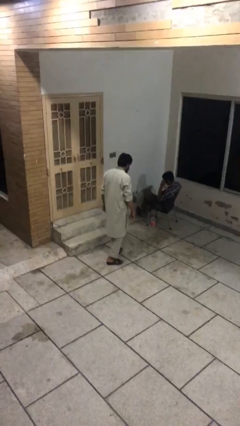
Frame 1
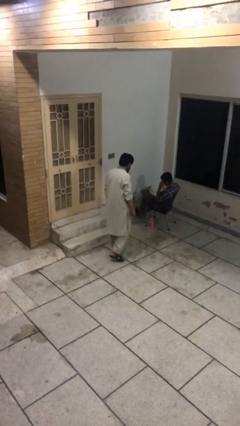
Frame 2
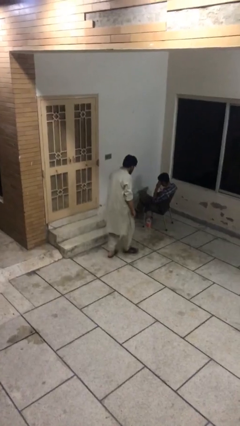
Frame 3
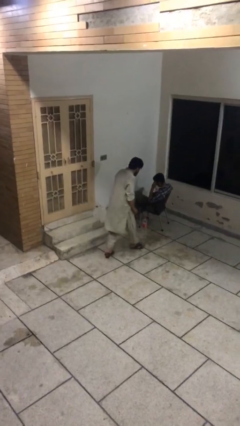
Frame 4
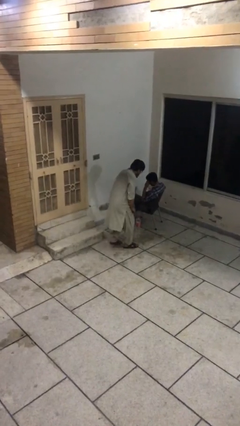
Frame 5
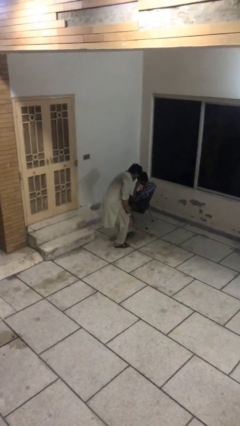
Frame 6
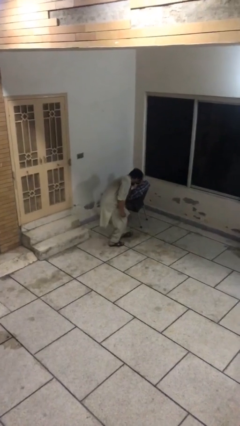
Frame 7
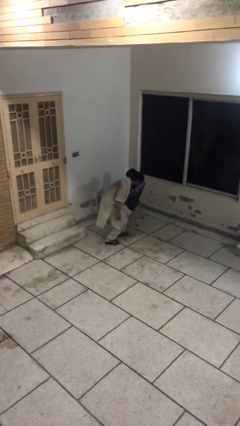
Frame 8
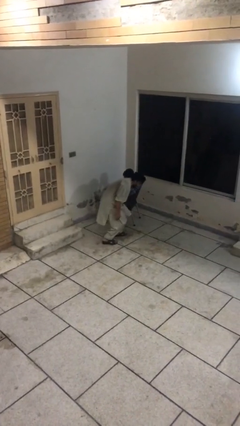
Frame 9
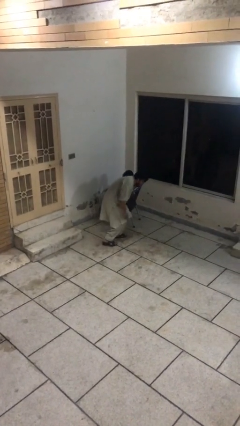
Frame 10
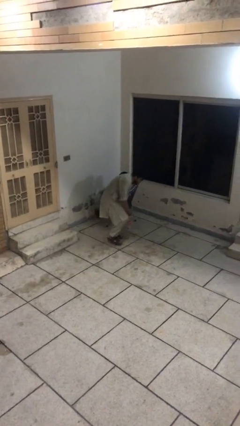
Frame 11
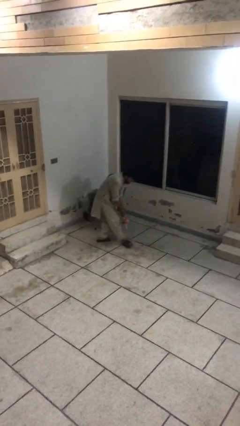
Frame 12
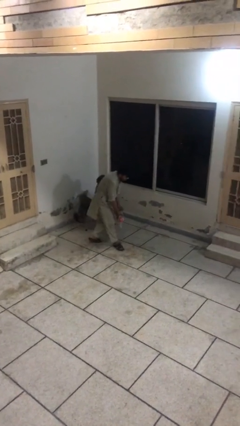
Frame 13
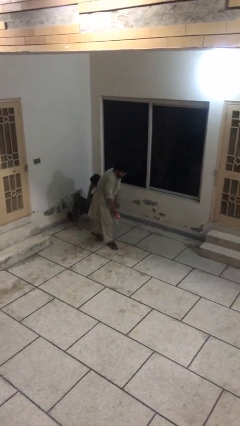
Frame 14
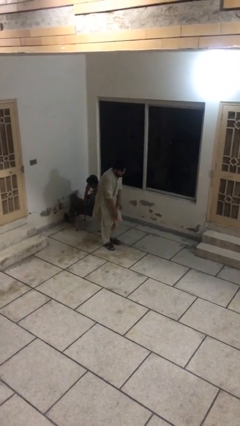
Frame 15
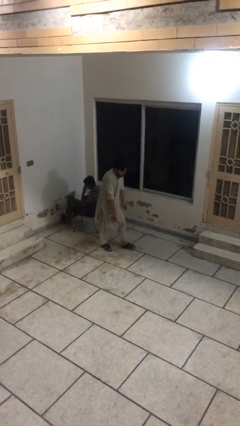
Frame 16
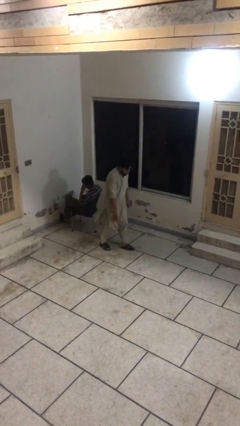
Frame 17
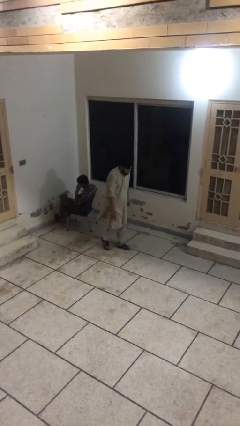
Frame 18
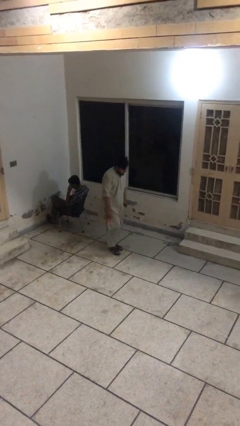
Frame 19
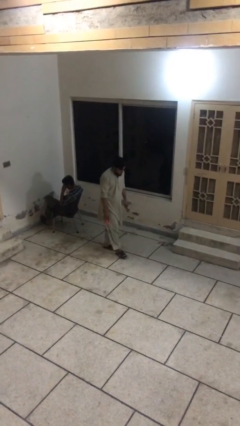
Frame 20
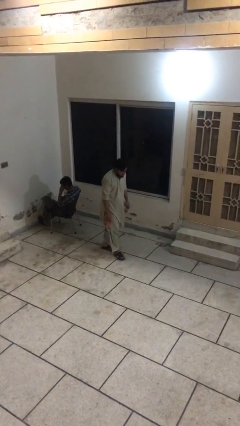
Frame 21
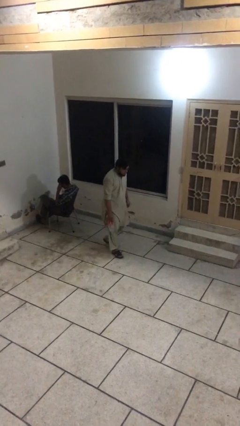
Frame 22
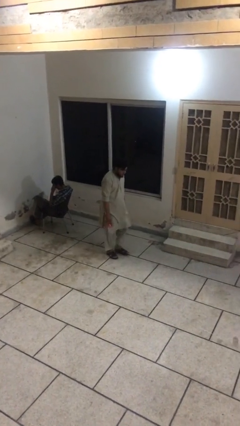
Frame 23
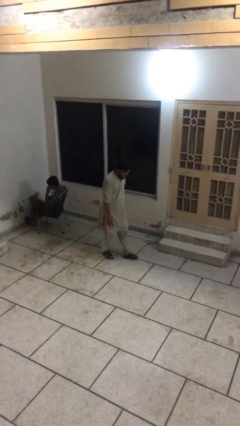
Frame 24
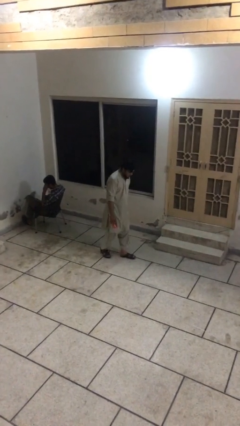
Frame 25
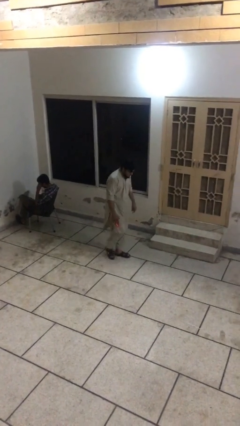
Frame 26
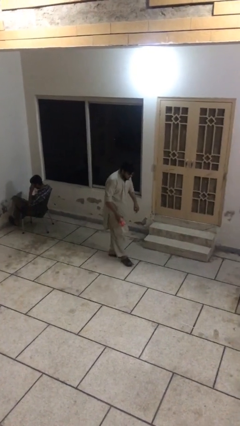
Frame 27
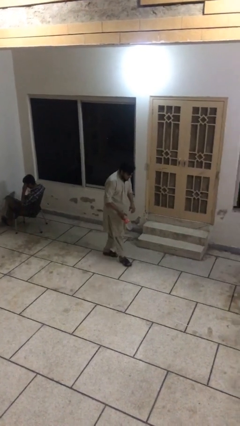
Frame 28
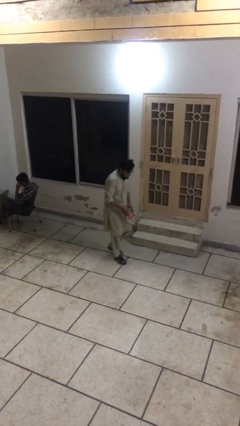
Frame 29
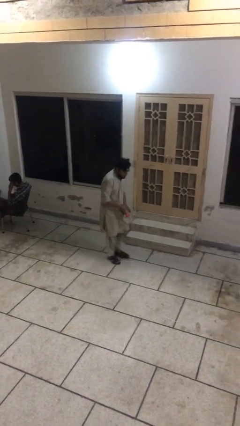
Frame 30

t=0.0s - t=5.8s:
person steals object from person

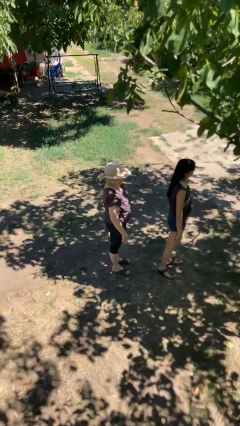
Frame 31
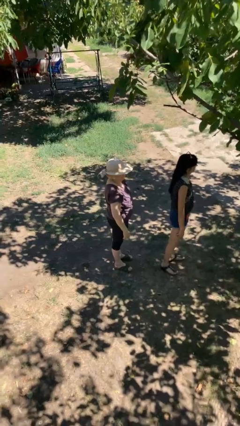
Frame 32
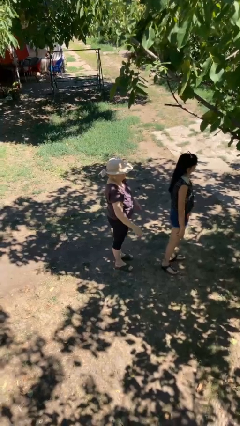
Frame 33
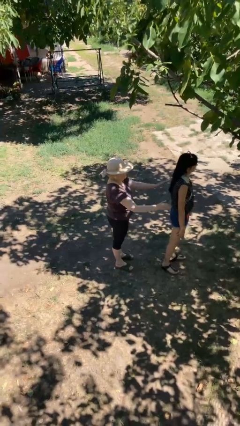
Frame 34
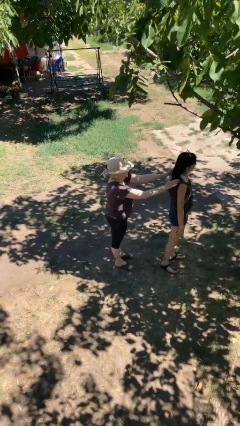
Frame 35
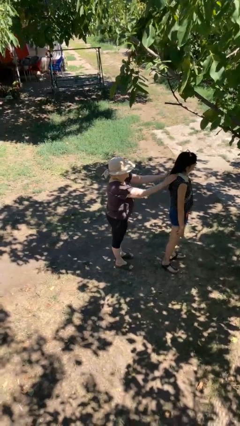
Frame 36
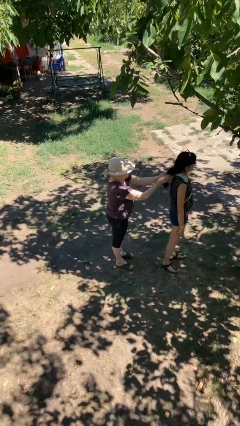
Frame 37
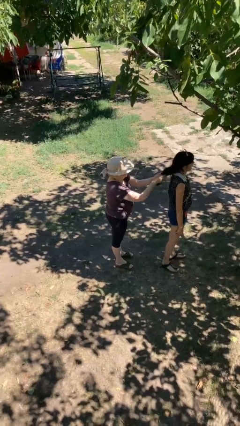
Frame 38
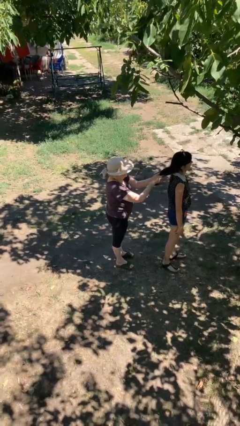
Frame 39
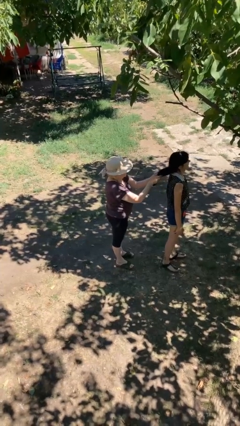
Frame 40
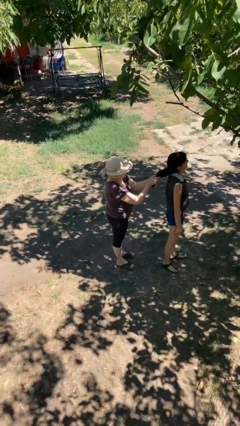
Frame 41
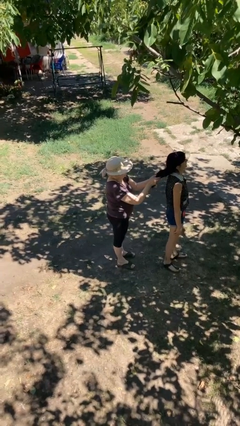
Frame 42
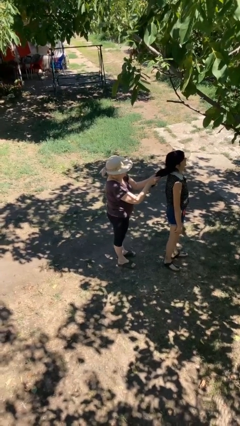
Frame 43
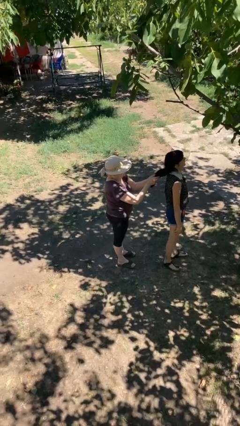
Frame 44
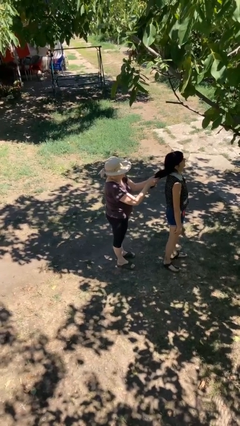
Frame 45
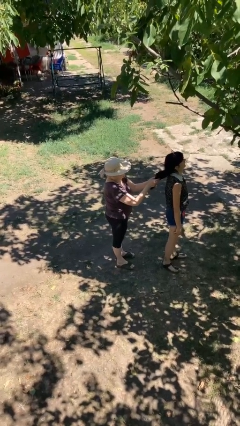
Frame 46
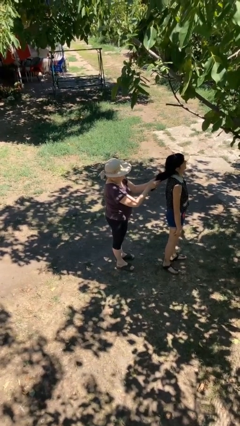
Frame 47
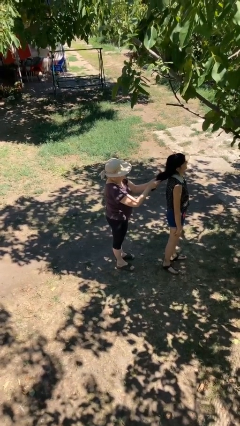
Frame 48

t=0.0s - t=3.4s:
person grabs person by hair

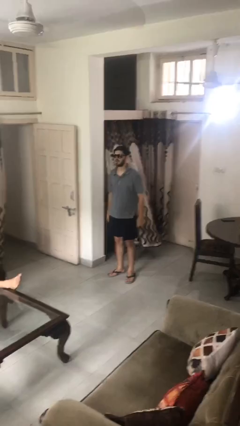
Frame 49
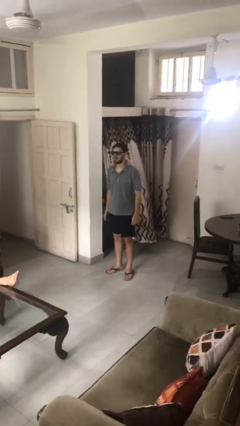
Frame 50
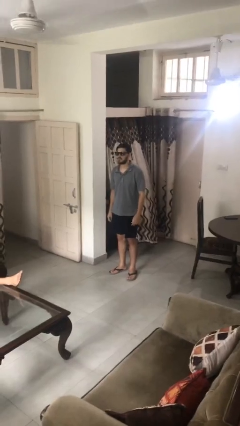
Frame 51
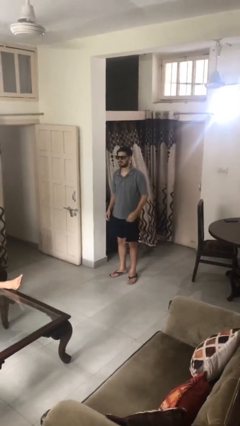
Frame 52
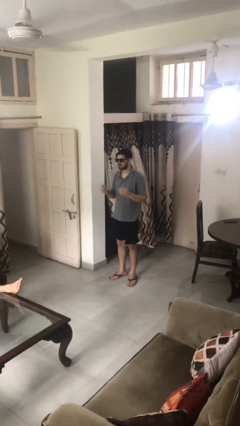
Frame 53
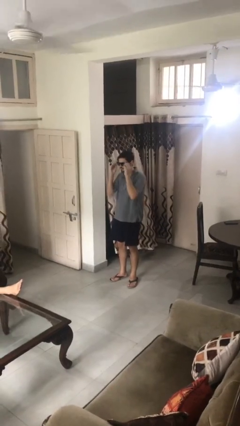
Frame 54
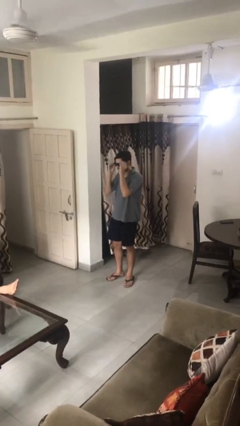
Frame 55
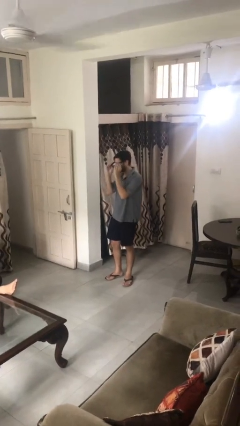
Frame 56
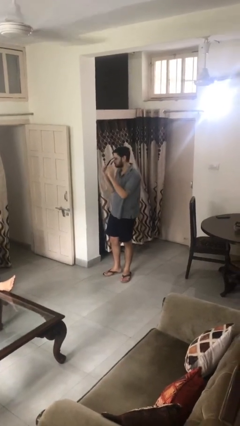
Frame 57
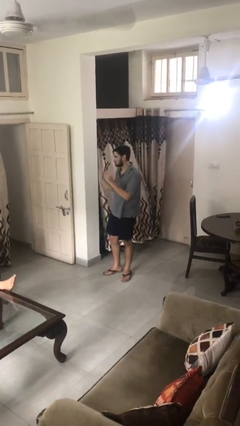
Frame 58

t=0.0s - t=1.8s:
person takes off sunglasses

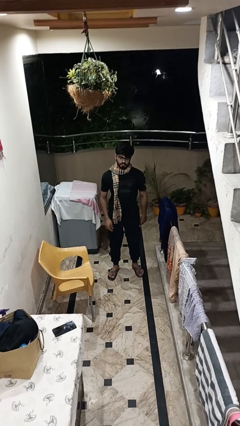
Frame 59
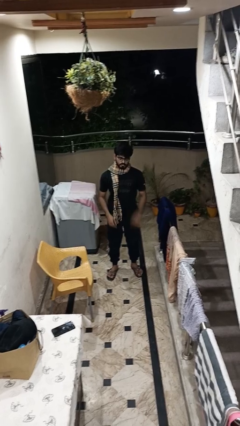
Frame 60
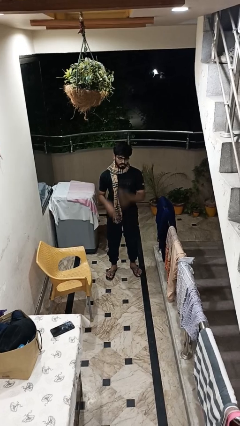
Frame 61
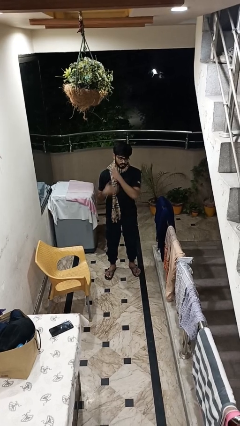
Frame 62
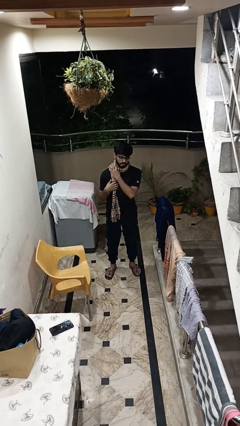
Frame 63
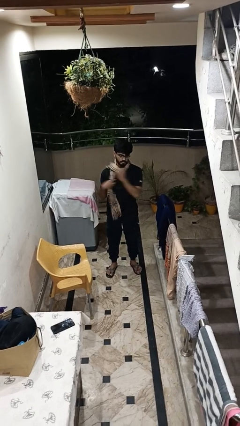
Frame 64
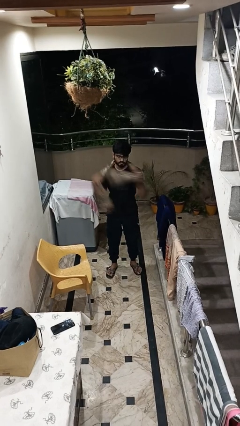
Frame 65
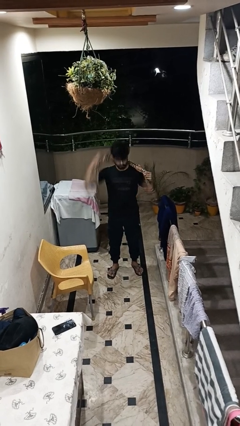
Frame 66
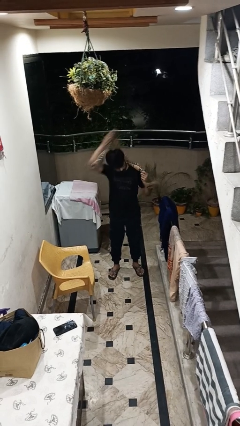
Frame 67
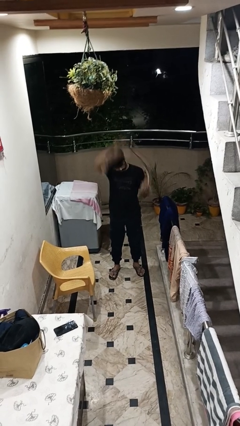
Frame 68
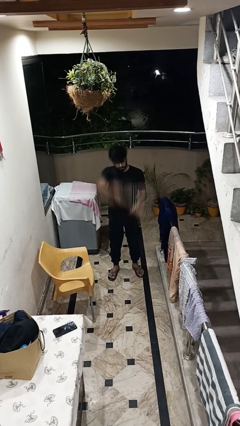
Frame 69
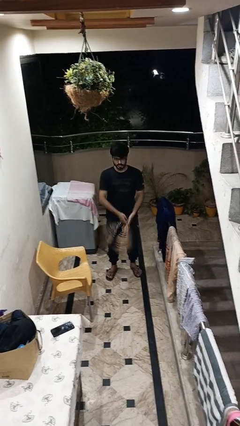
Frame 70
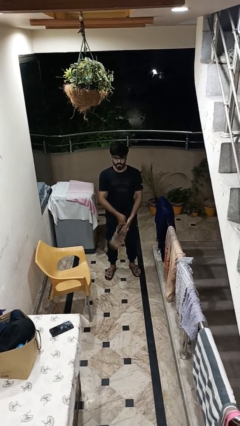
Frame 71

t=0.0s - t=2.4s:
person takes off scarf

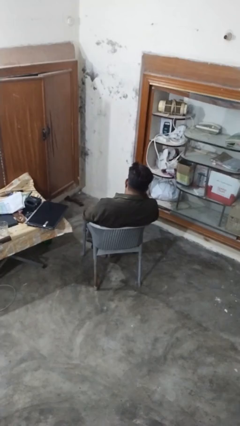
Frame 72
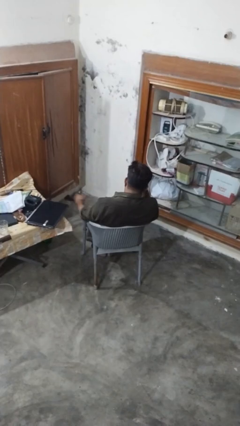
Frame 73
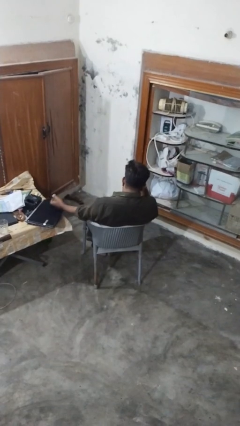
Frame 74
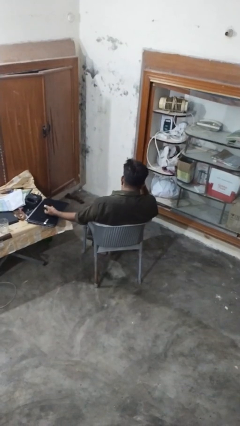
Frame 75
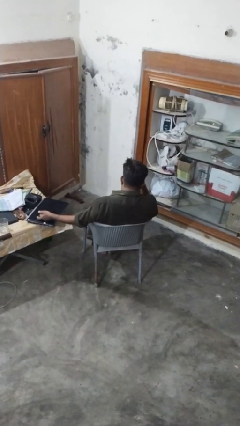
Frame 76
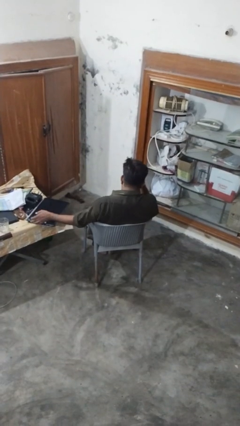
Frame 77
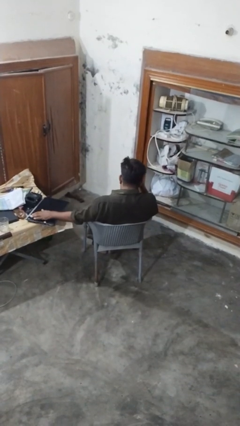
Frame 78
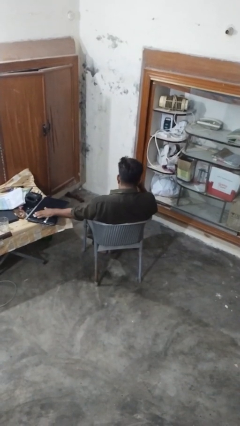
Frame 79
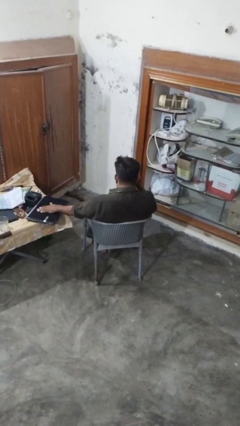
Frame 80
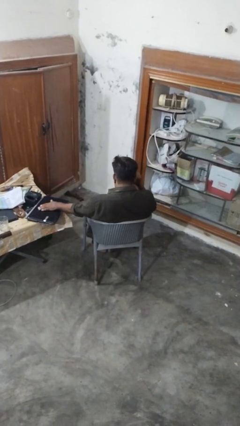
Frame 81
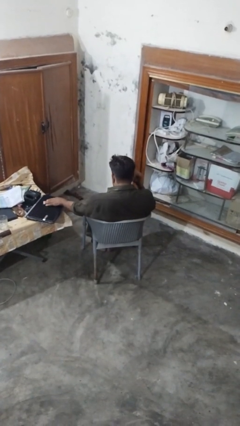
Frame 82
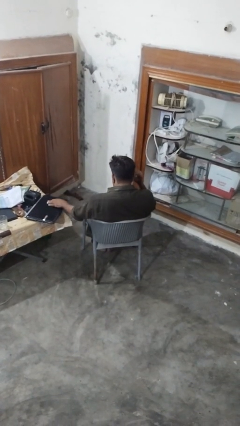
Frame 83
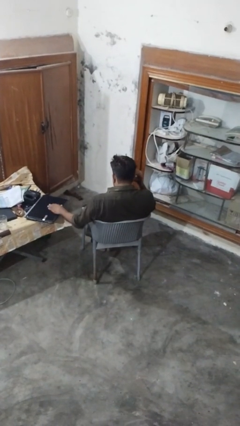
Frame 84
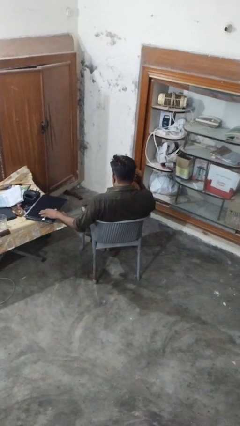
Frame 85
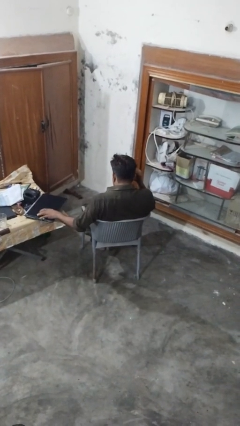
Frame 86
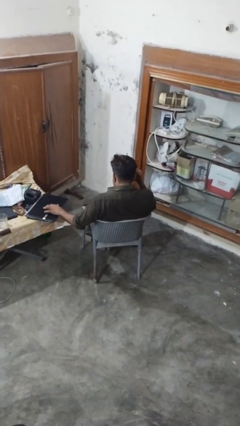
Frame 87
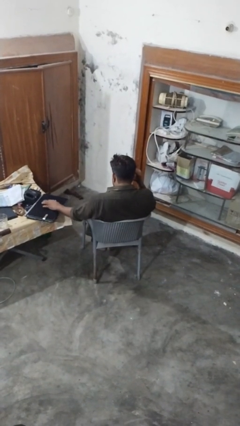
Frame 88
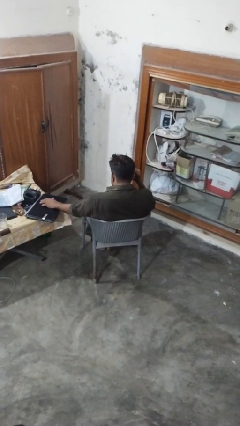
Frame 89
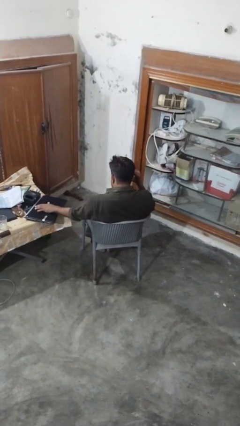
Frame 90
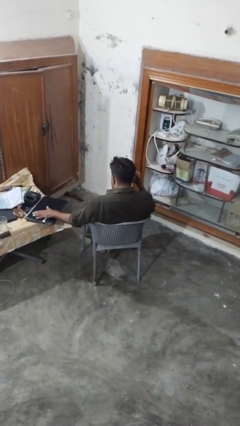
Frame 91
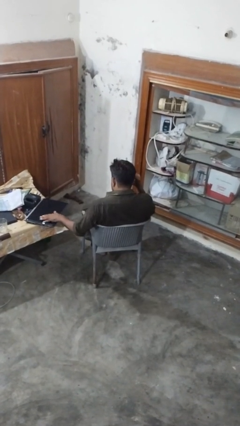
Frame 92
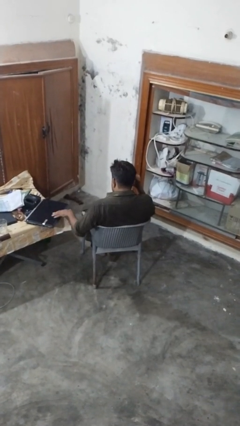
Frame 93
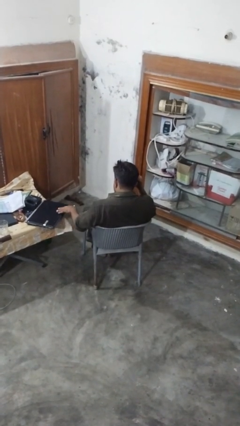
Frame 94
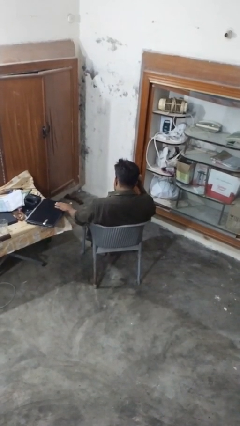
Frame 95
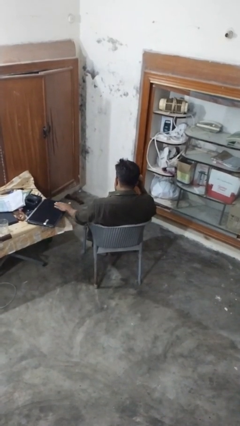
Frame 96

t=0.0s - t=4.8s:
person waves hand over object
